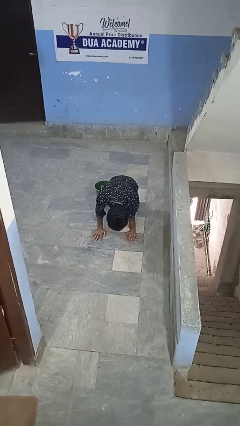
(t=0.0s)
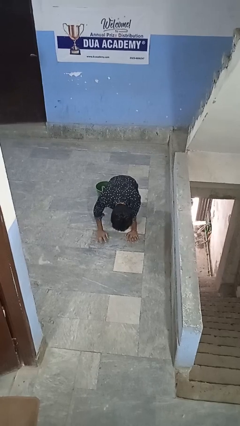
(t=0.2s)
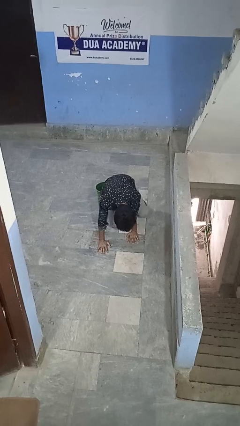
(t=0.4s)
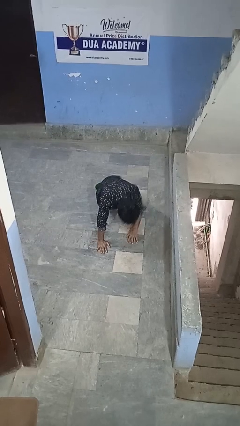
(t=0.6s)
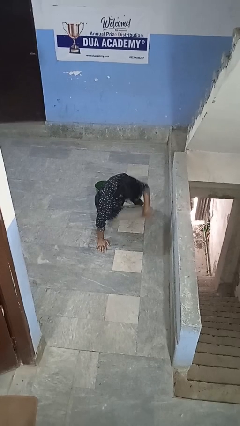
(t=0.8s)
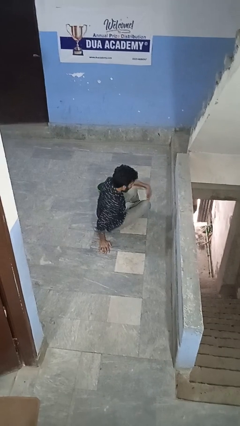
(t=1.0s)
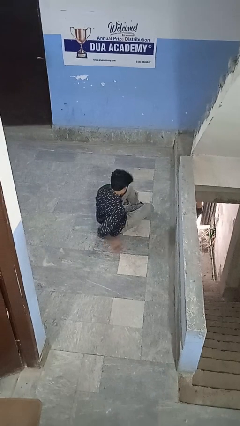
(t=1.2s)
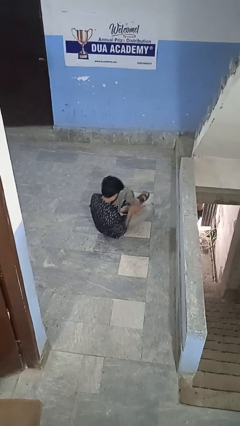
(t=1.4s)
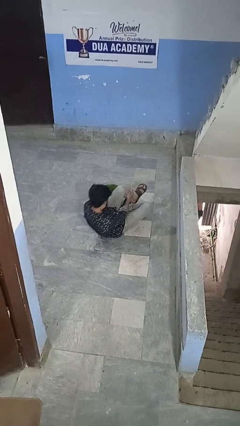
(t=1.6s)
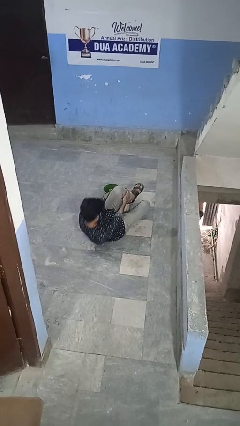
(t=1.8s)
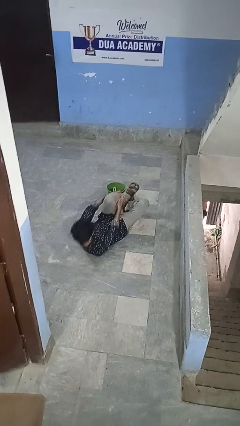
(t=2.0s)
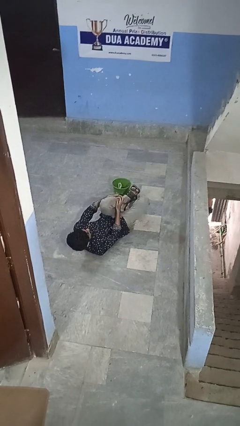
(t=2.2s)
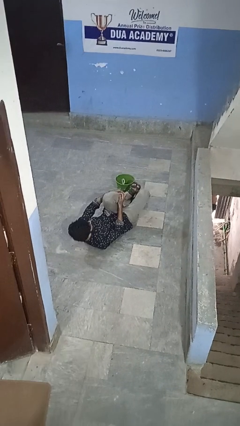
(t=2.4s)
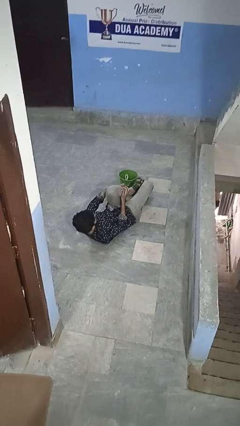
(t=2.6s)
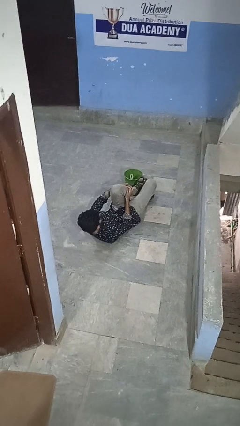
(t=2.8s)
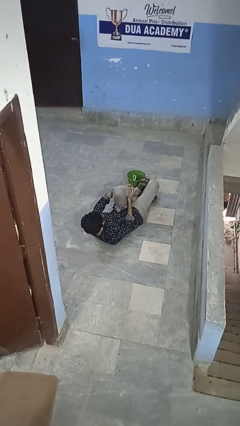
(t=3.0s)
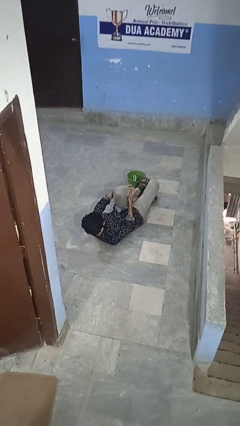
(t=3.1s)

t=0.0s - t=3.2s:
person lies down on floor

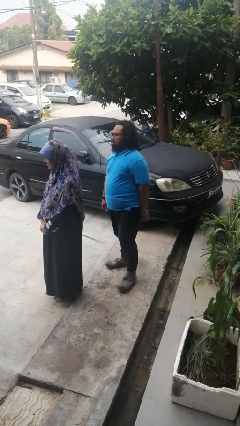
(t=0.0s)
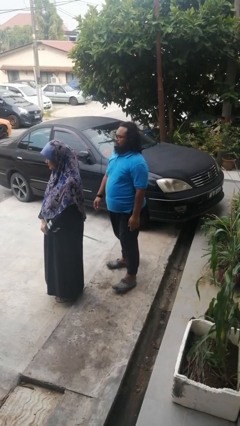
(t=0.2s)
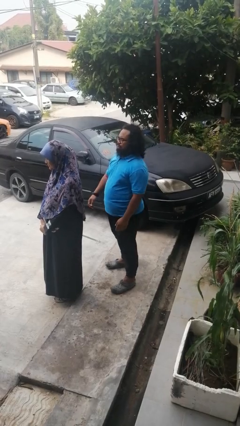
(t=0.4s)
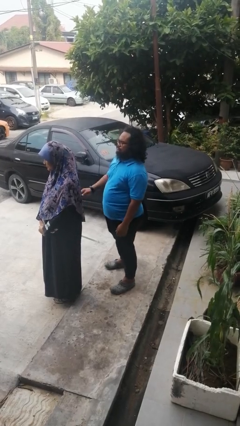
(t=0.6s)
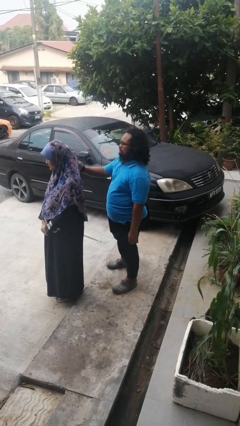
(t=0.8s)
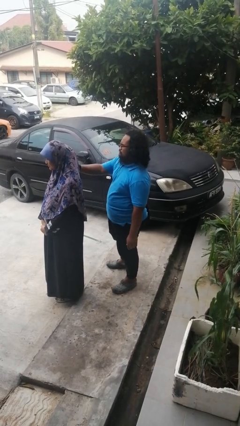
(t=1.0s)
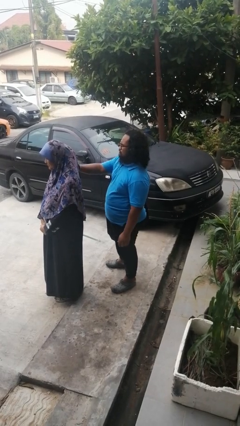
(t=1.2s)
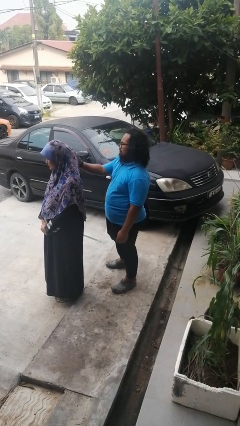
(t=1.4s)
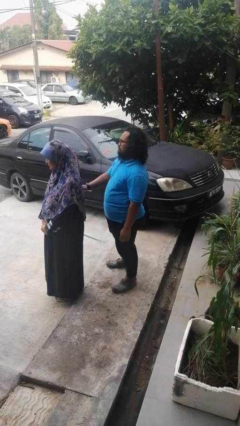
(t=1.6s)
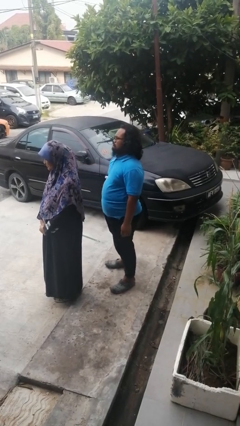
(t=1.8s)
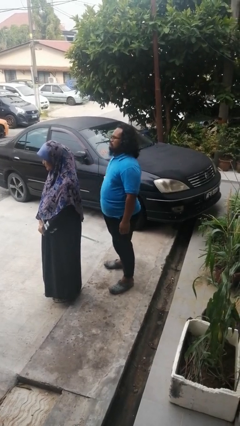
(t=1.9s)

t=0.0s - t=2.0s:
person touches back of person

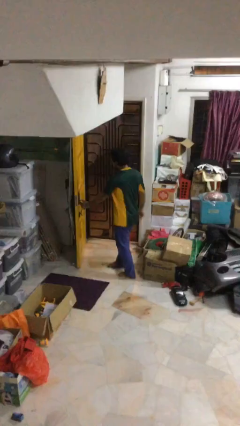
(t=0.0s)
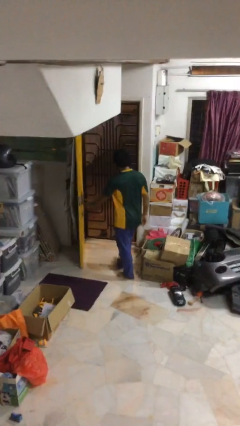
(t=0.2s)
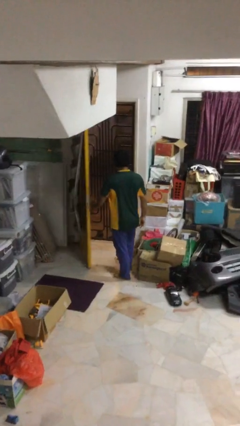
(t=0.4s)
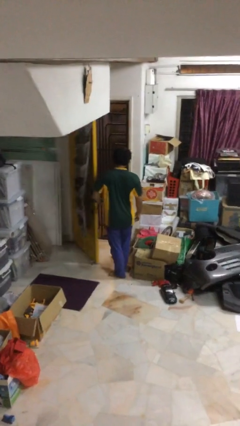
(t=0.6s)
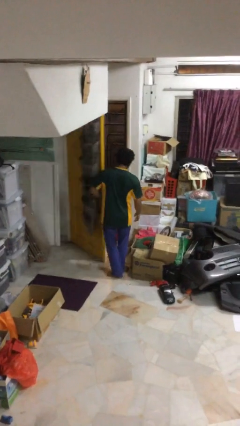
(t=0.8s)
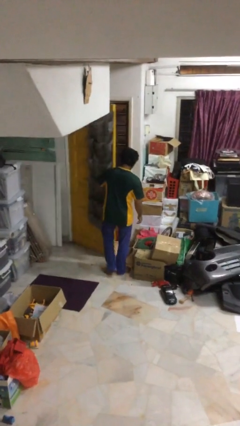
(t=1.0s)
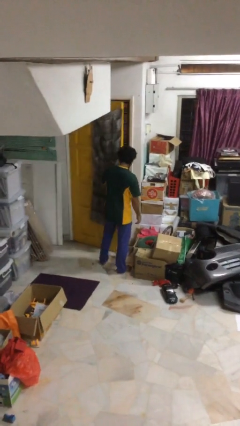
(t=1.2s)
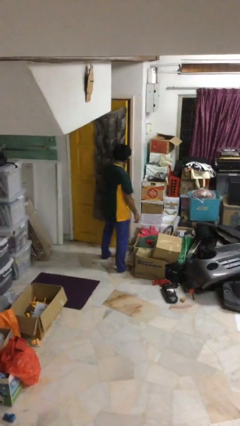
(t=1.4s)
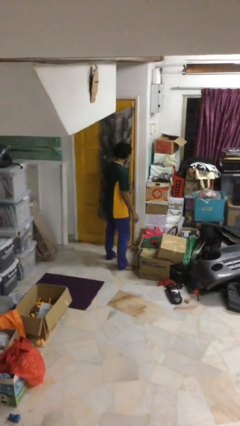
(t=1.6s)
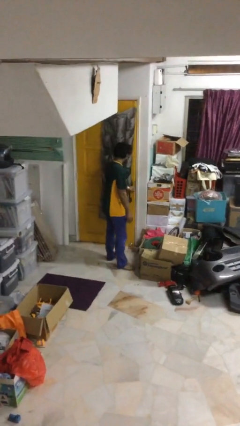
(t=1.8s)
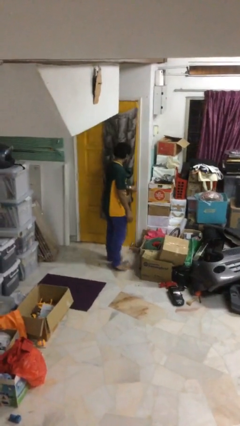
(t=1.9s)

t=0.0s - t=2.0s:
person closes facility door

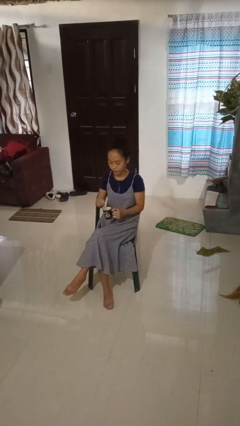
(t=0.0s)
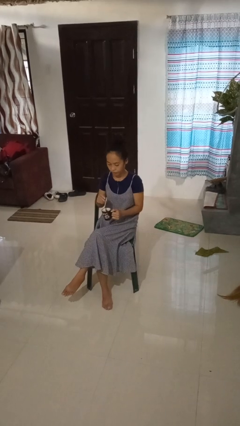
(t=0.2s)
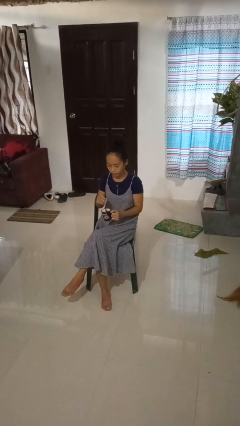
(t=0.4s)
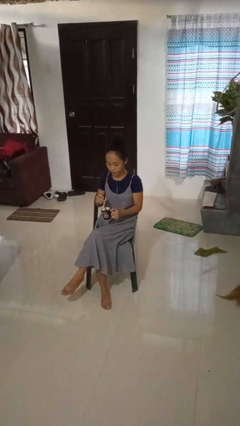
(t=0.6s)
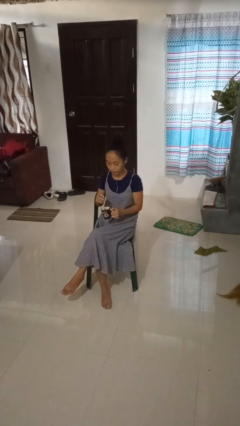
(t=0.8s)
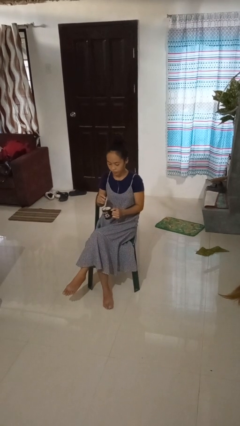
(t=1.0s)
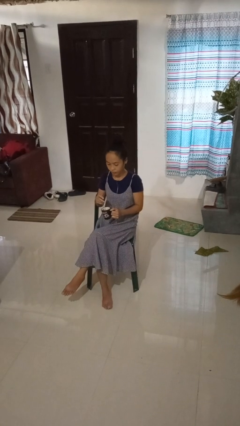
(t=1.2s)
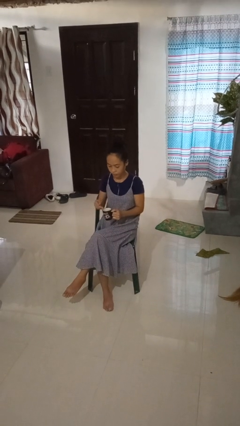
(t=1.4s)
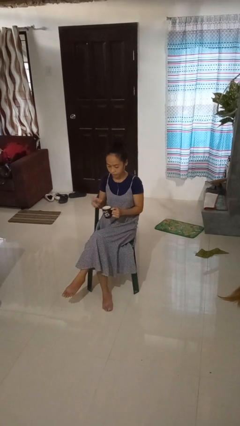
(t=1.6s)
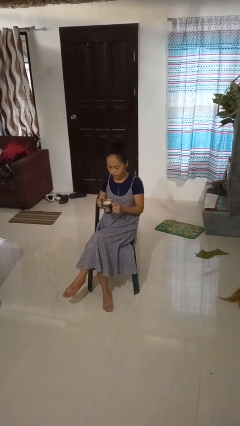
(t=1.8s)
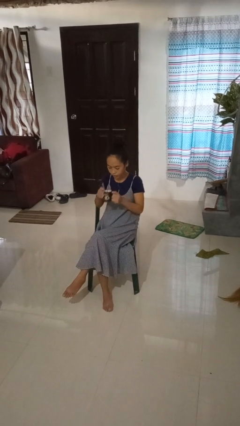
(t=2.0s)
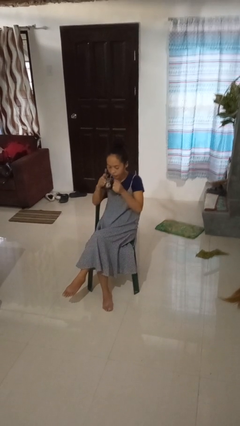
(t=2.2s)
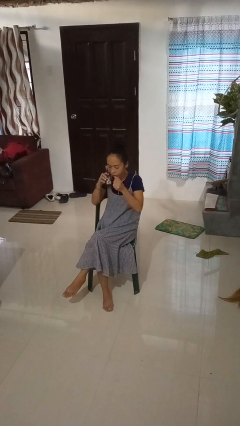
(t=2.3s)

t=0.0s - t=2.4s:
person stirs mug

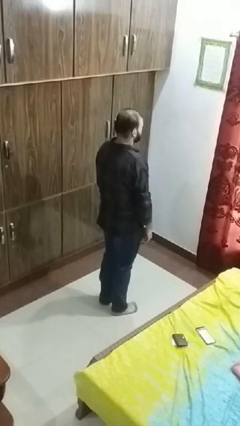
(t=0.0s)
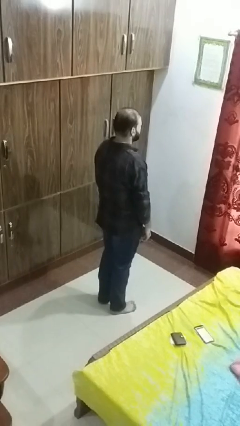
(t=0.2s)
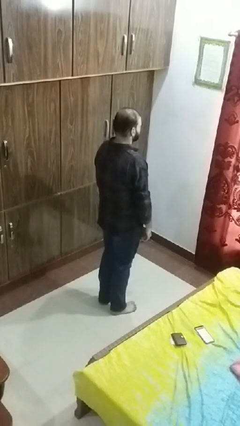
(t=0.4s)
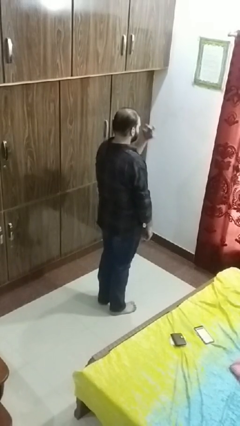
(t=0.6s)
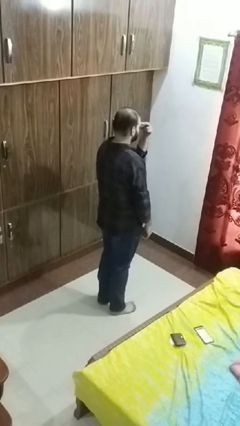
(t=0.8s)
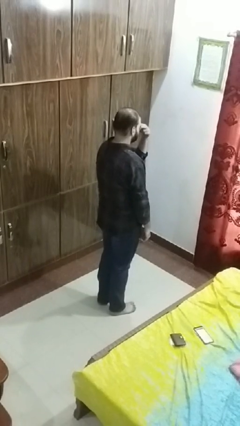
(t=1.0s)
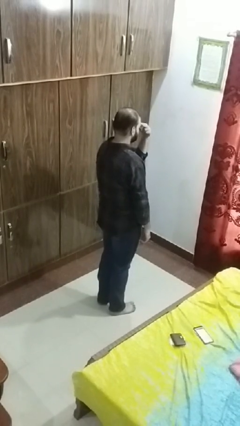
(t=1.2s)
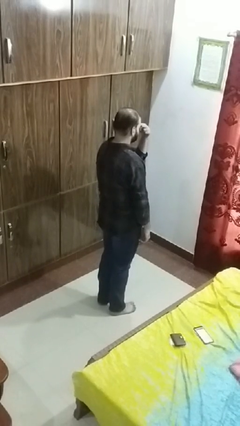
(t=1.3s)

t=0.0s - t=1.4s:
person gestures watch closely

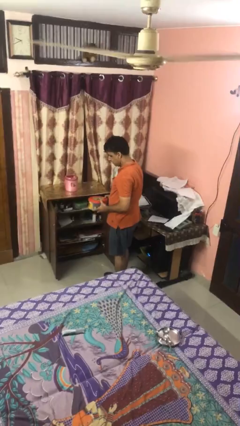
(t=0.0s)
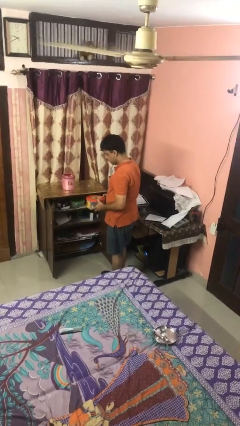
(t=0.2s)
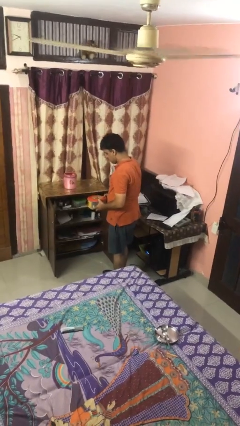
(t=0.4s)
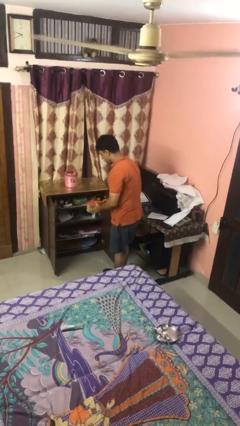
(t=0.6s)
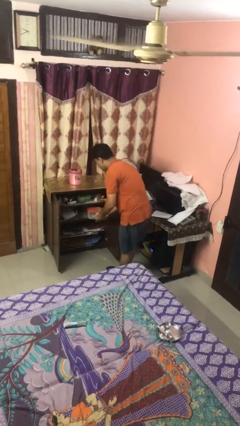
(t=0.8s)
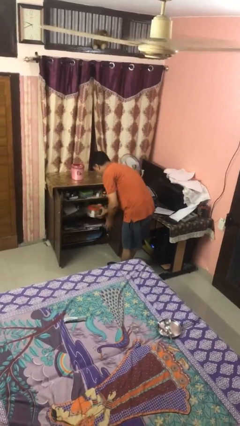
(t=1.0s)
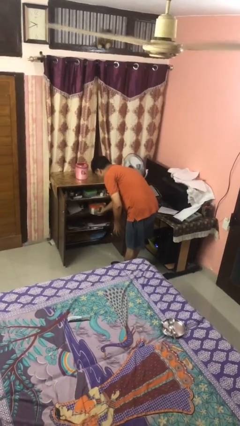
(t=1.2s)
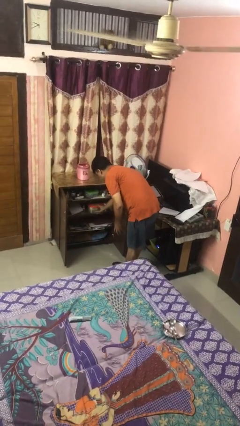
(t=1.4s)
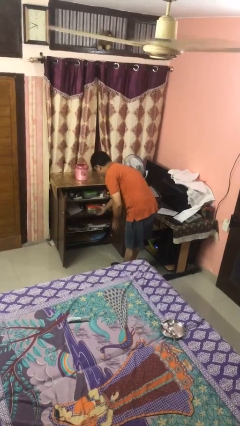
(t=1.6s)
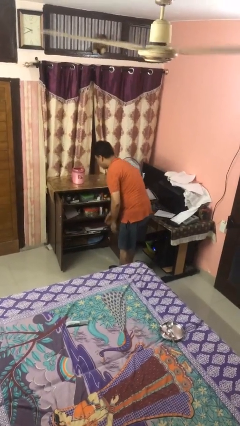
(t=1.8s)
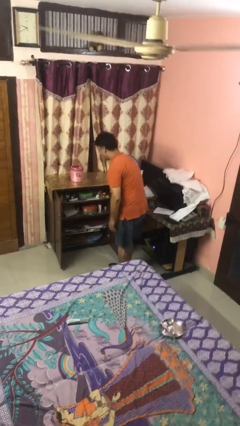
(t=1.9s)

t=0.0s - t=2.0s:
person puts down object into cabinet

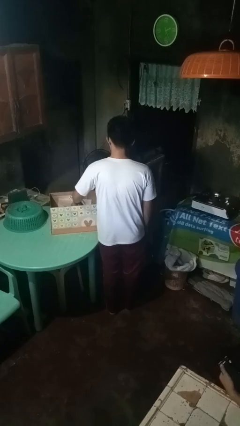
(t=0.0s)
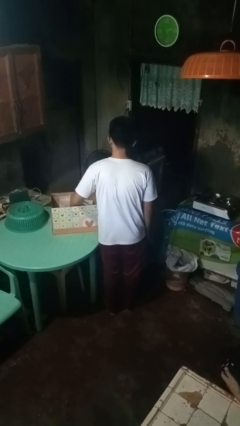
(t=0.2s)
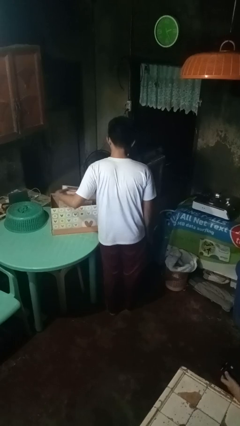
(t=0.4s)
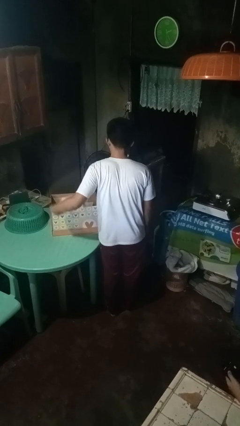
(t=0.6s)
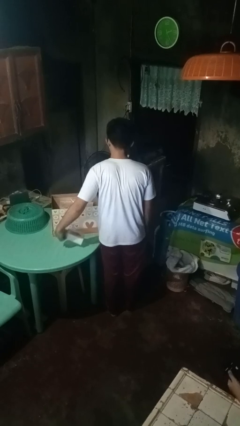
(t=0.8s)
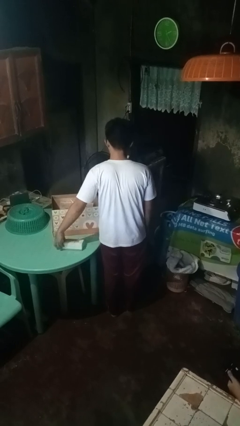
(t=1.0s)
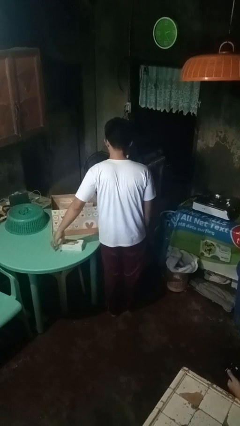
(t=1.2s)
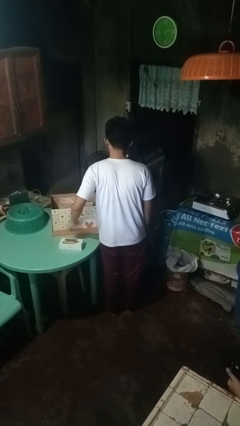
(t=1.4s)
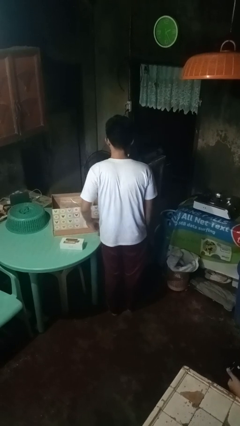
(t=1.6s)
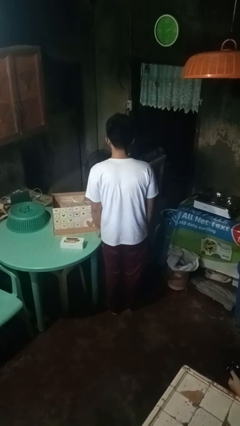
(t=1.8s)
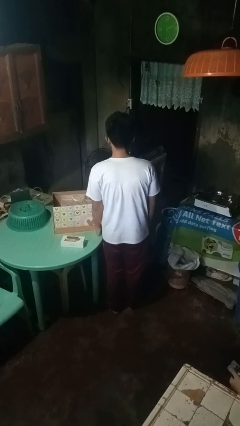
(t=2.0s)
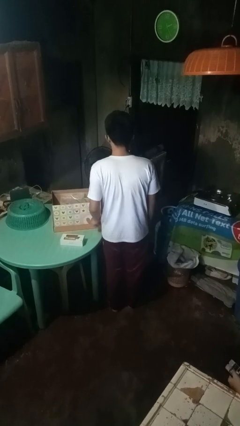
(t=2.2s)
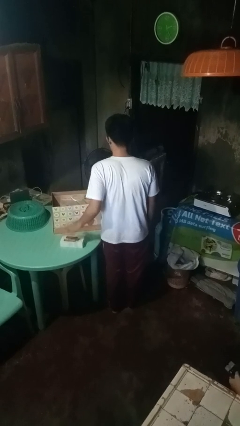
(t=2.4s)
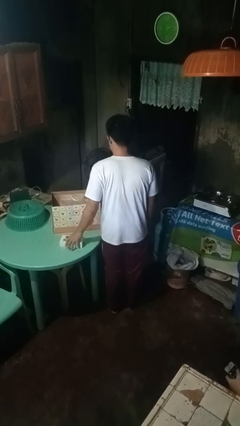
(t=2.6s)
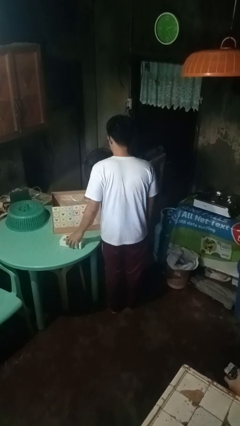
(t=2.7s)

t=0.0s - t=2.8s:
person takes object from box

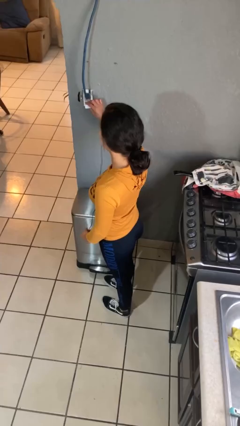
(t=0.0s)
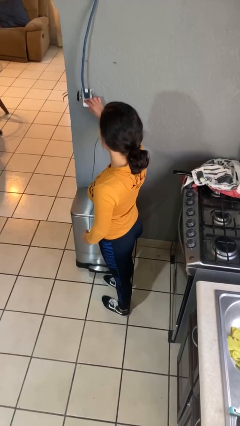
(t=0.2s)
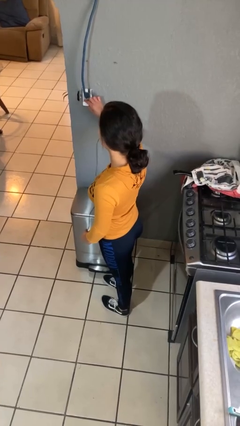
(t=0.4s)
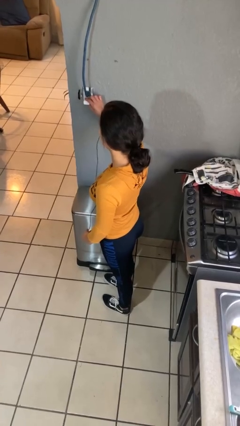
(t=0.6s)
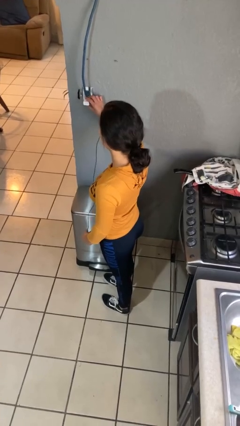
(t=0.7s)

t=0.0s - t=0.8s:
person plugs into electrical socket

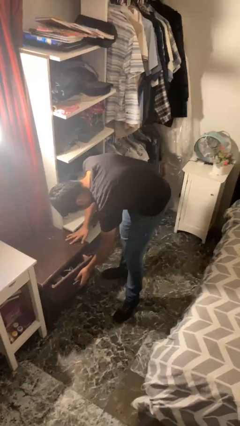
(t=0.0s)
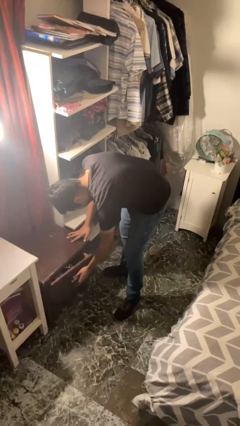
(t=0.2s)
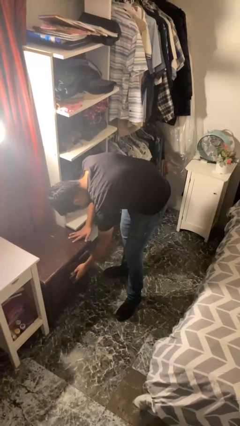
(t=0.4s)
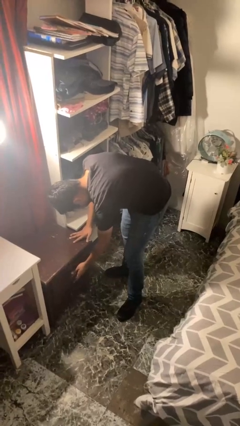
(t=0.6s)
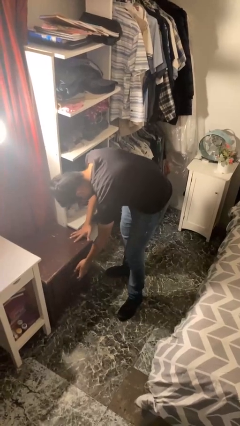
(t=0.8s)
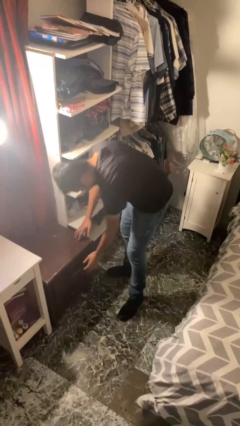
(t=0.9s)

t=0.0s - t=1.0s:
person closes dresser drawer
